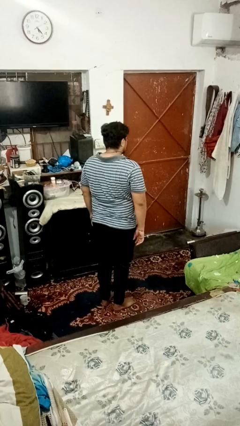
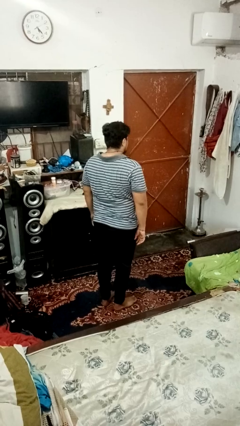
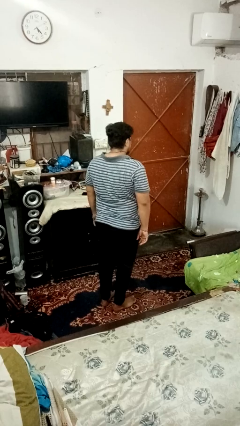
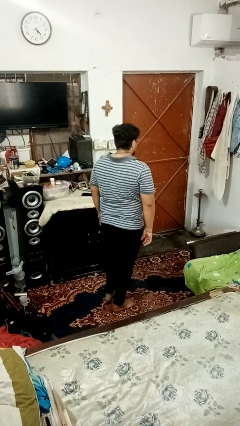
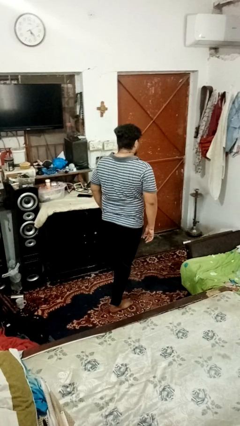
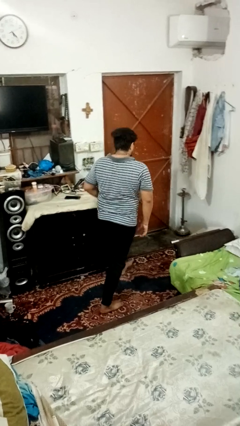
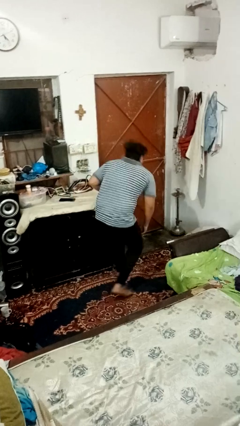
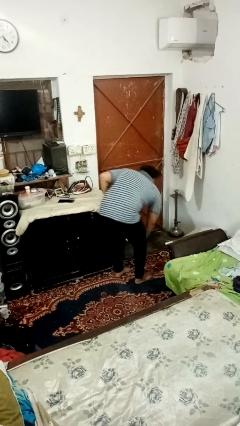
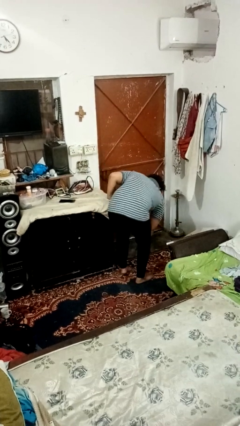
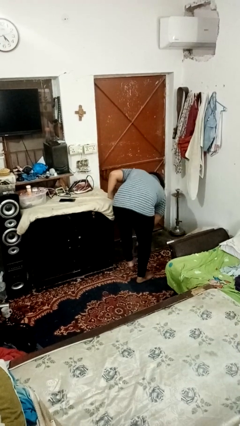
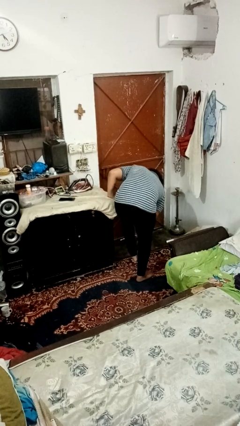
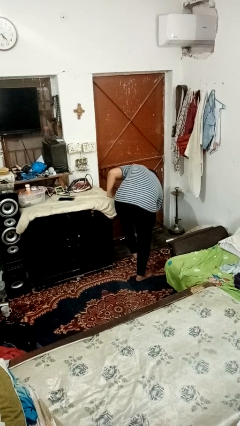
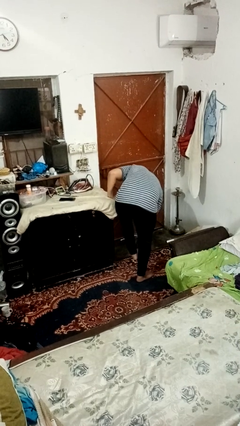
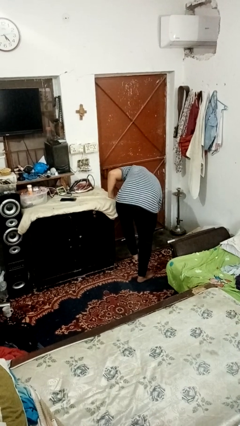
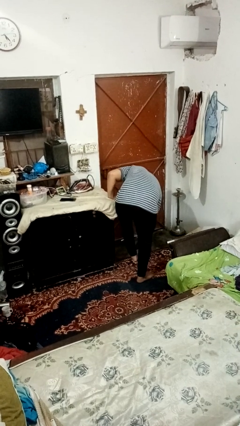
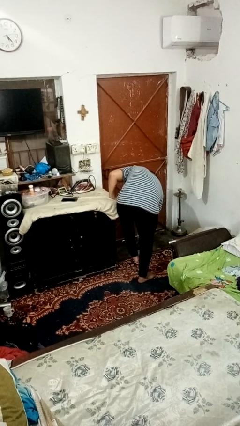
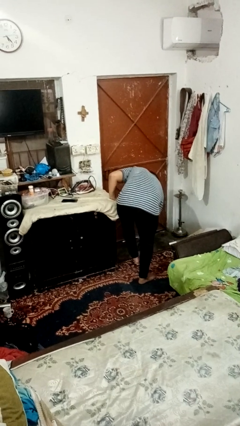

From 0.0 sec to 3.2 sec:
person stubs toe

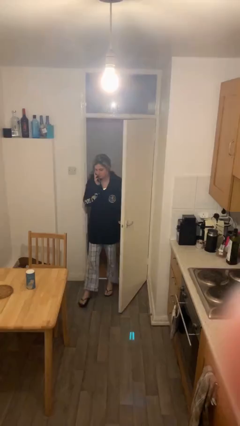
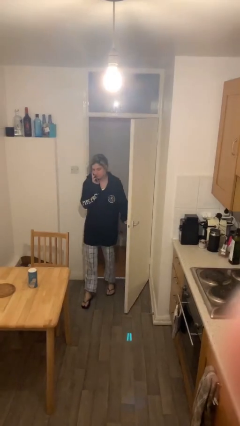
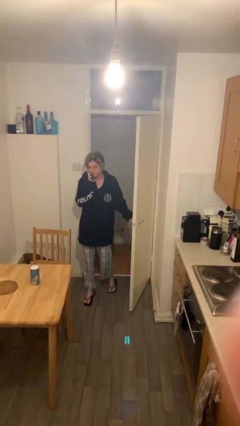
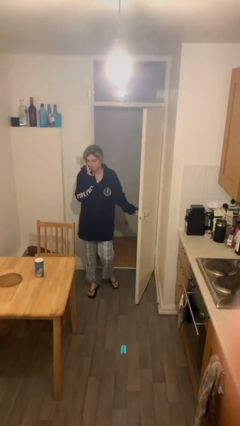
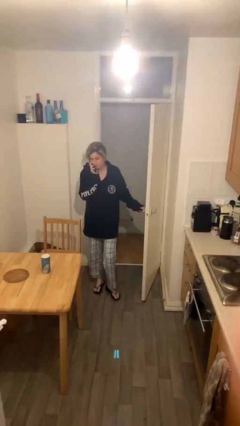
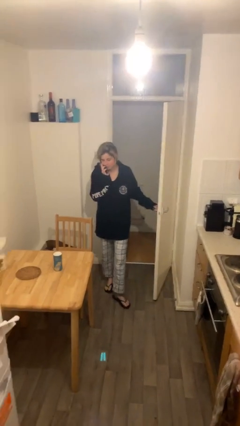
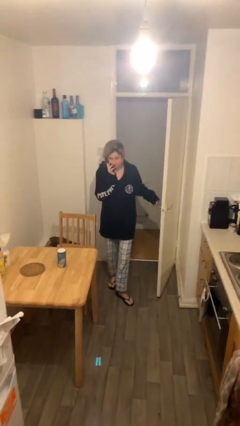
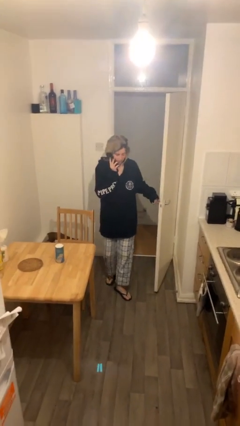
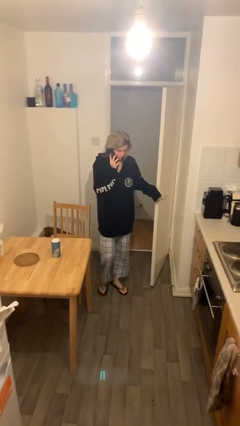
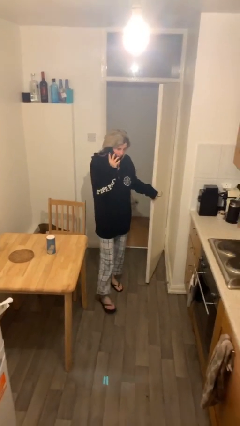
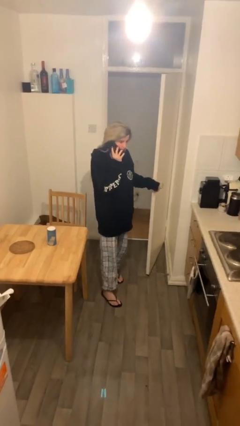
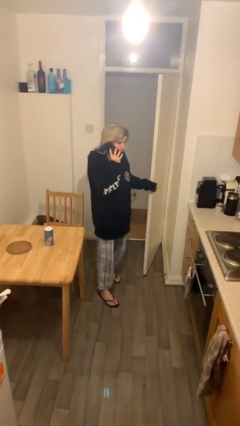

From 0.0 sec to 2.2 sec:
person enters scene through structure

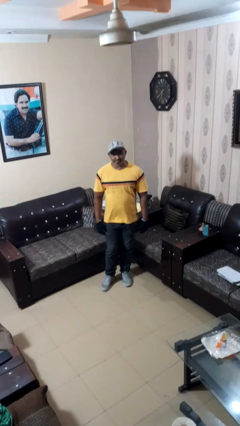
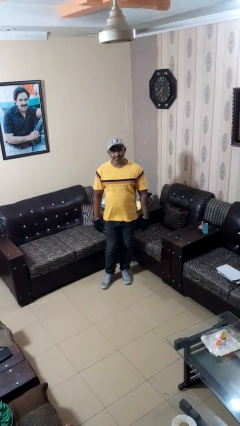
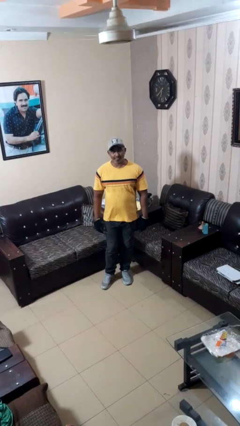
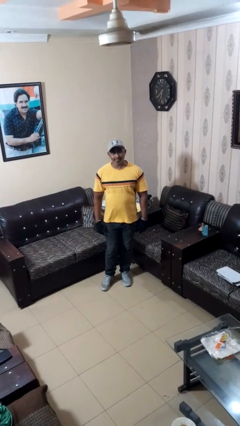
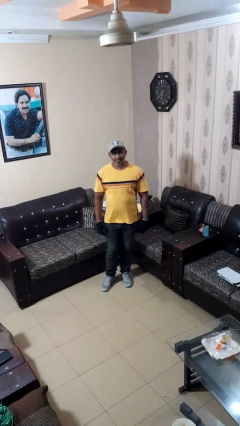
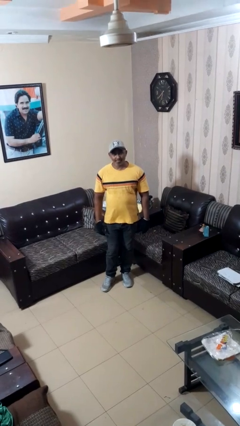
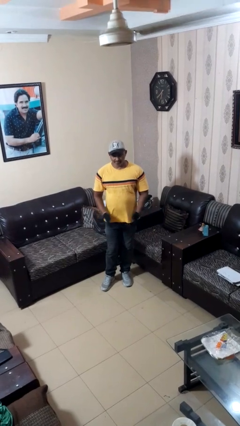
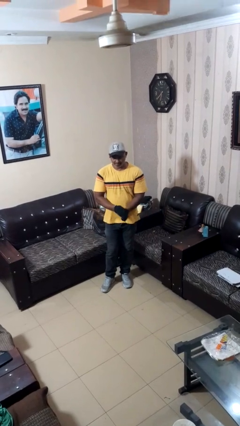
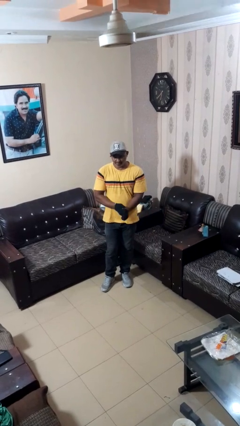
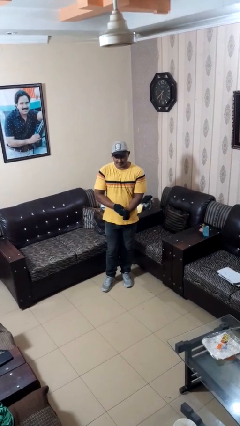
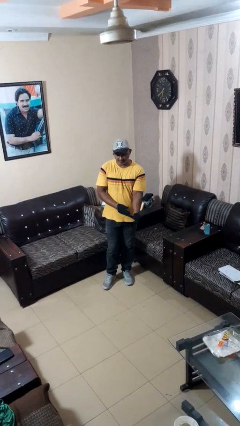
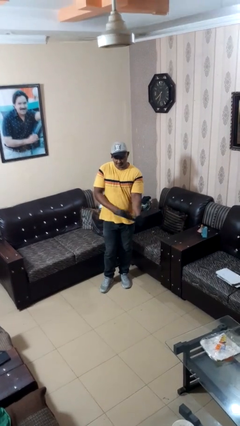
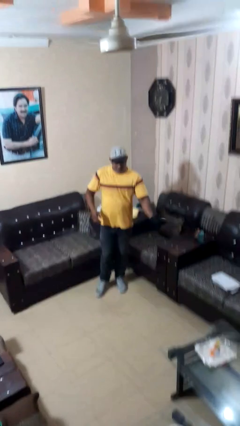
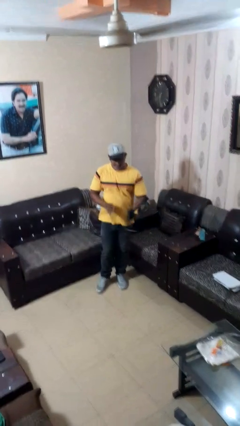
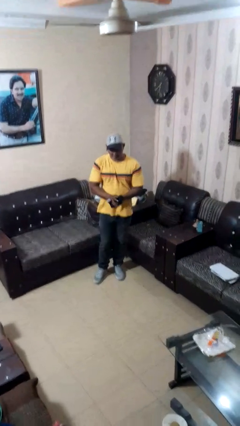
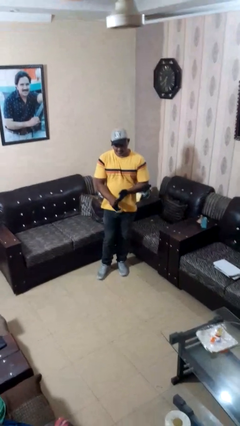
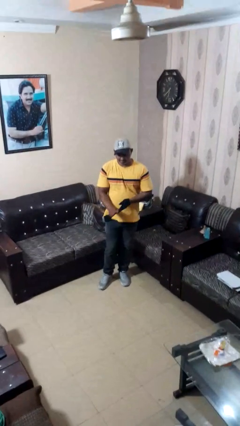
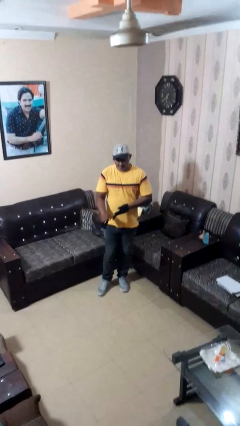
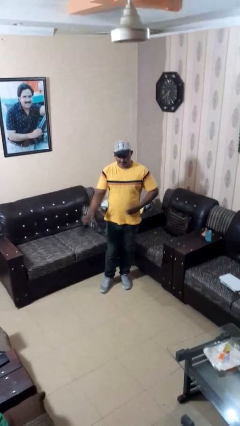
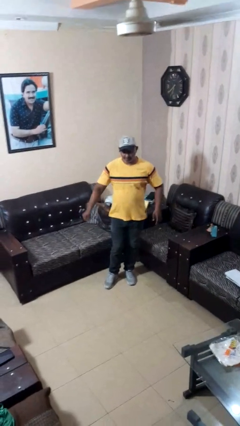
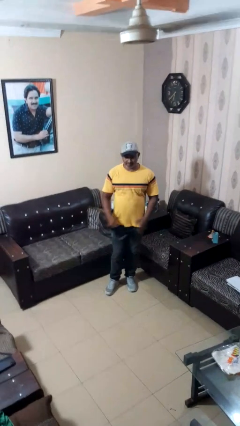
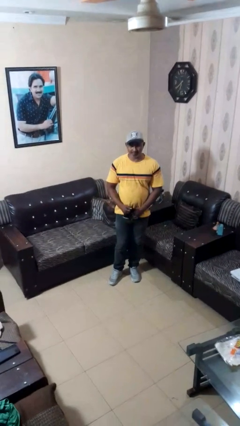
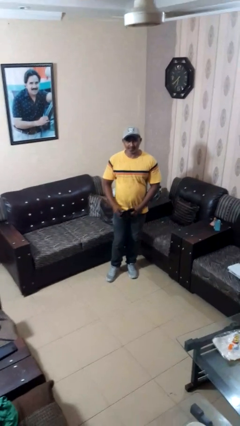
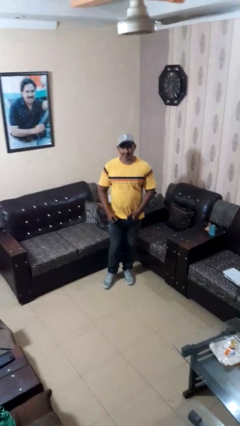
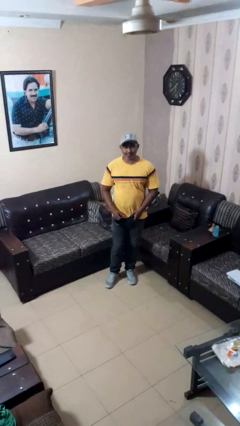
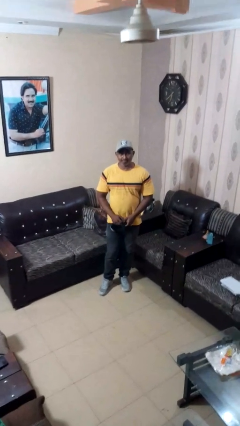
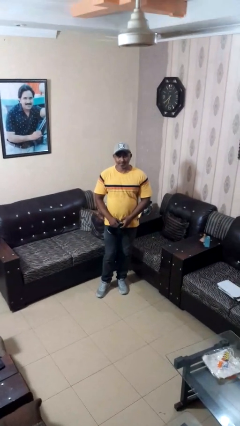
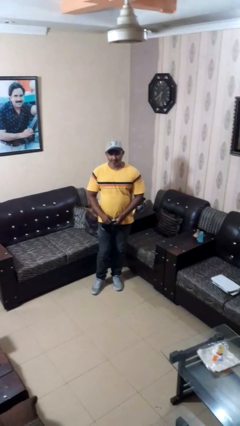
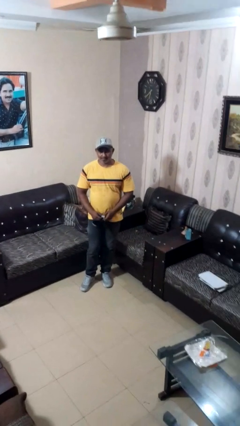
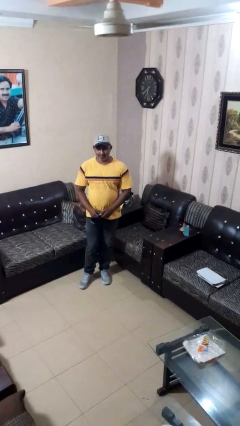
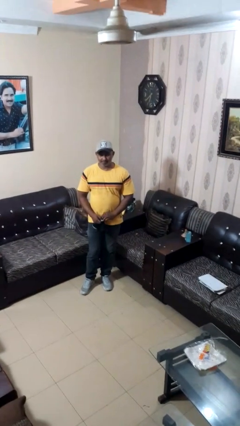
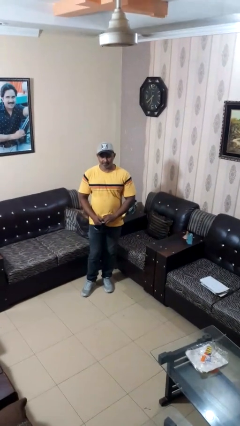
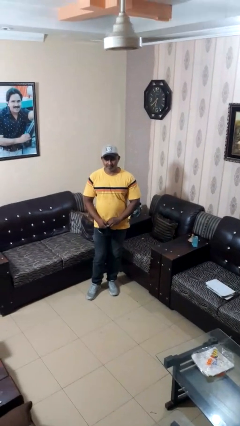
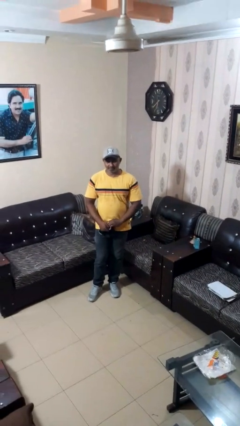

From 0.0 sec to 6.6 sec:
person takes off gloves

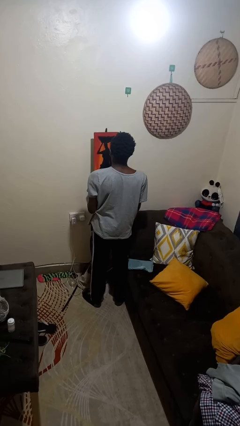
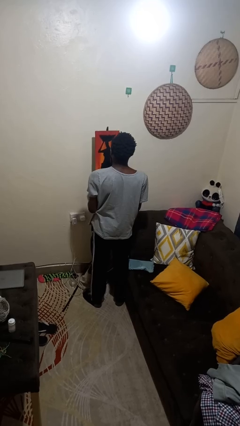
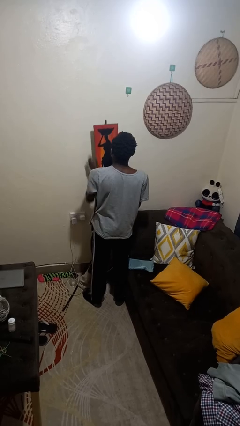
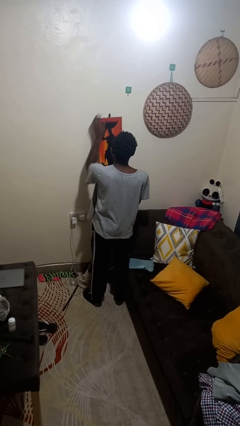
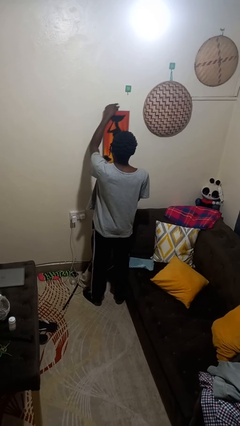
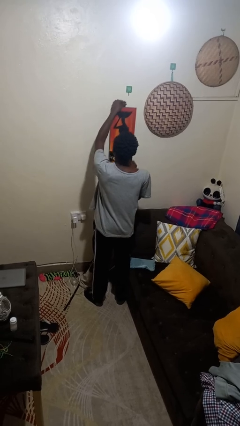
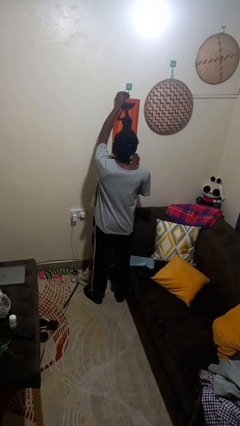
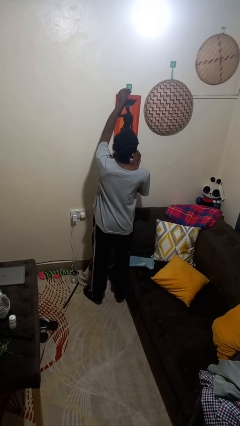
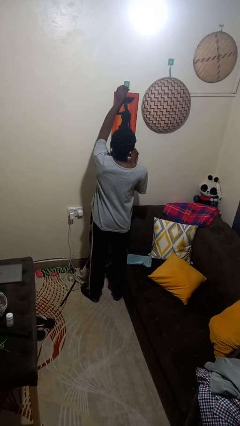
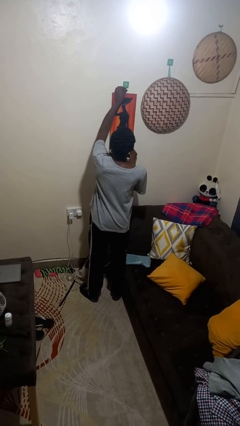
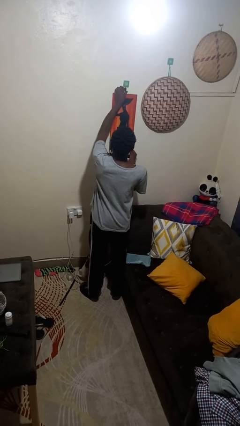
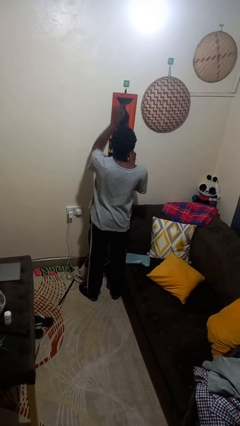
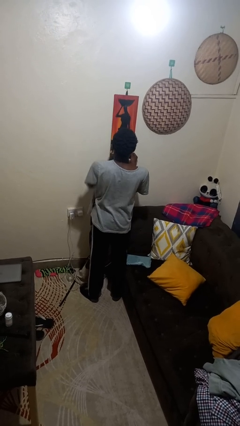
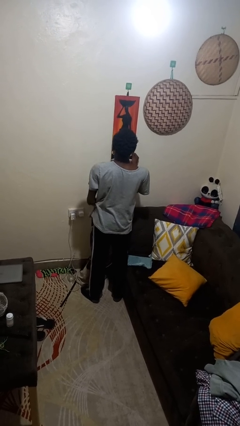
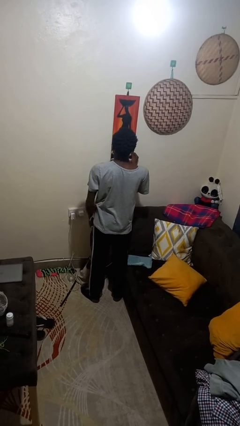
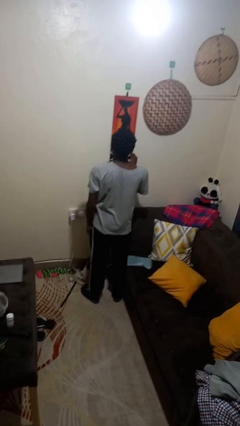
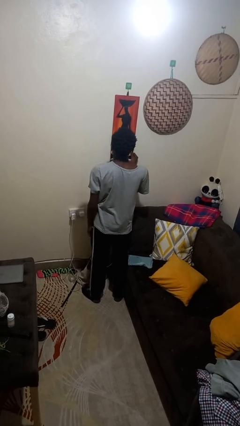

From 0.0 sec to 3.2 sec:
person puts up picture frame

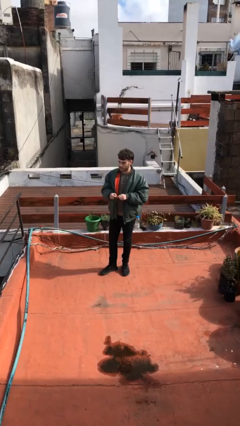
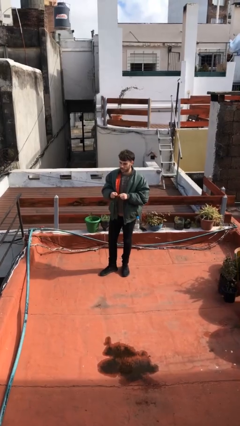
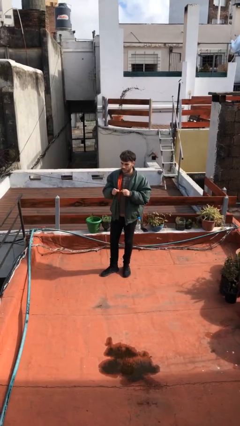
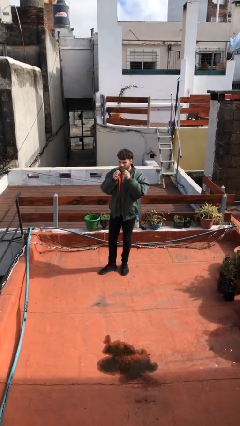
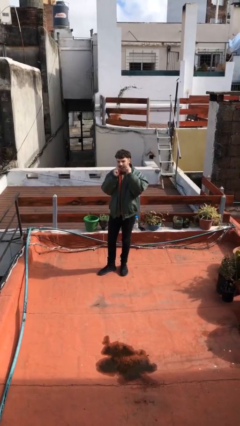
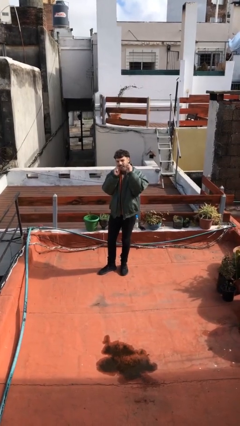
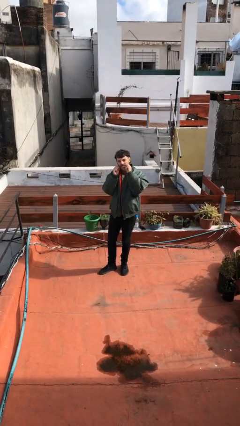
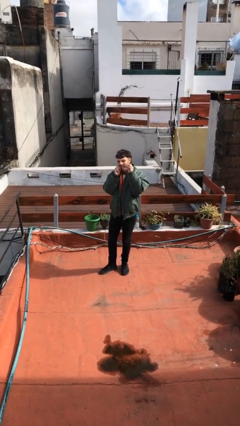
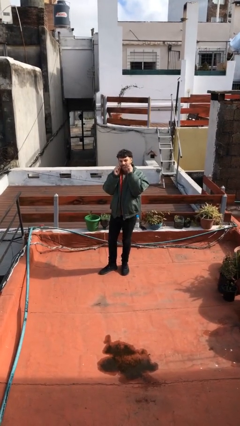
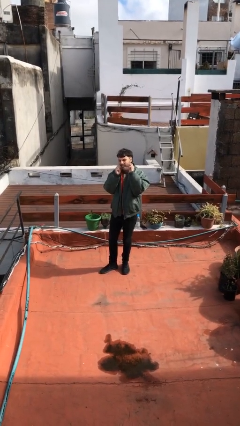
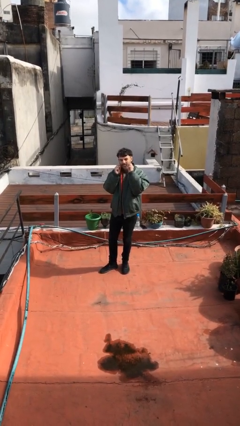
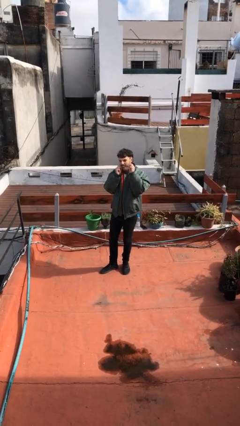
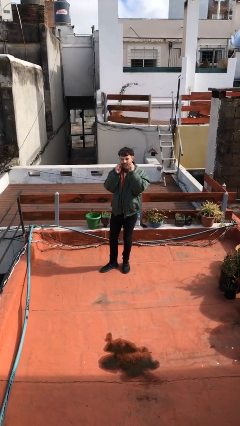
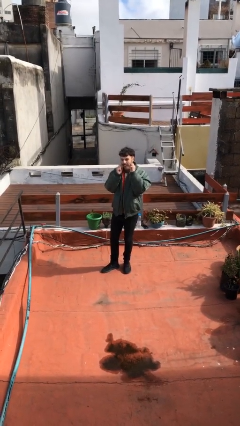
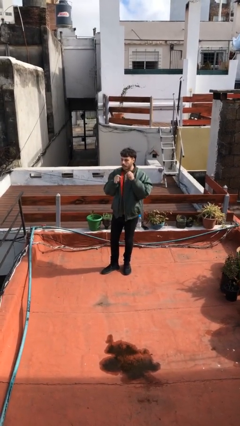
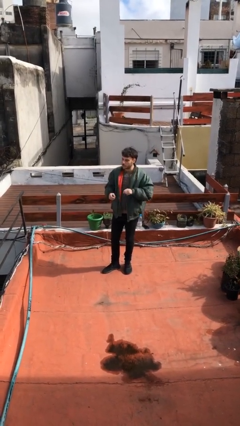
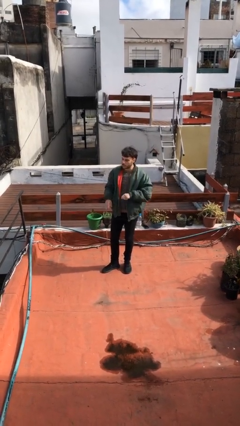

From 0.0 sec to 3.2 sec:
person flosses
